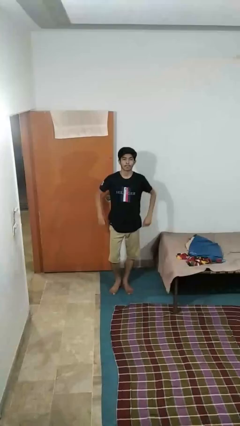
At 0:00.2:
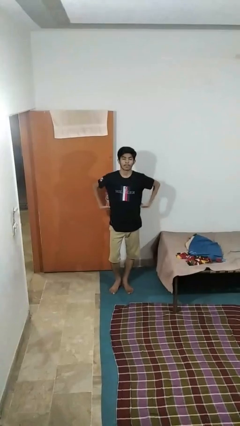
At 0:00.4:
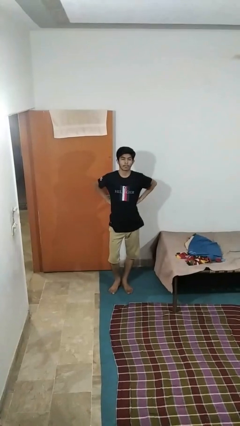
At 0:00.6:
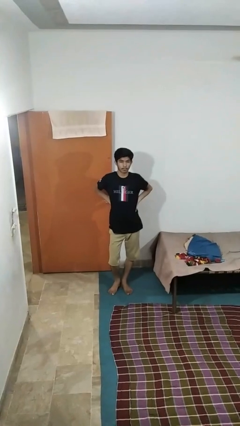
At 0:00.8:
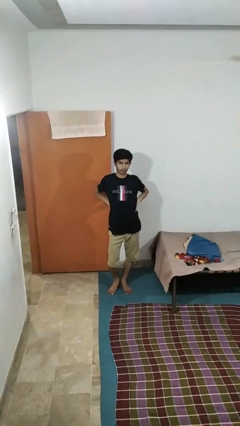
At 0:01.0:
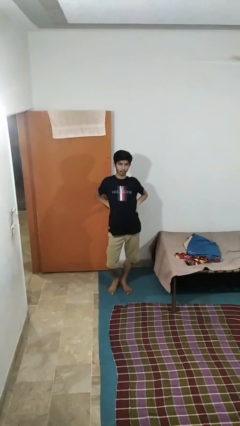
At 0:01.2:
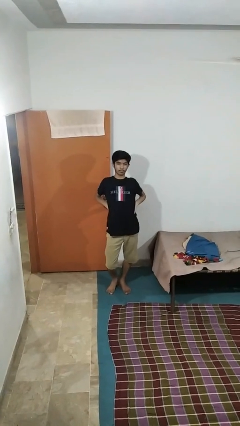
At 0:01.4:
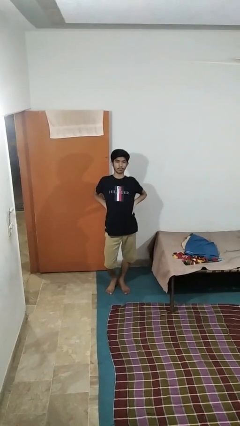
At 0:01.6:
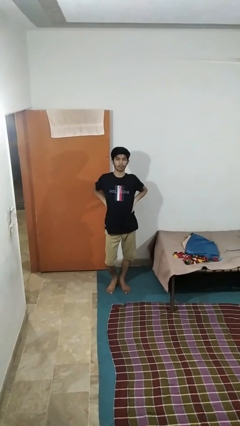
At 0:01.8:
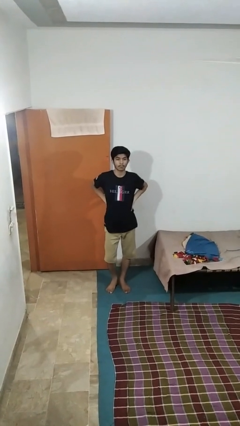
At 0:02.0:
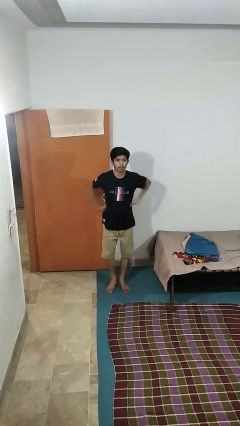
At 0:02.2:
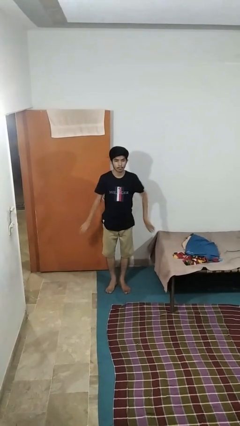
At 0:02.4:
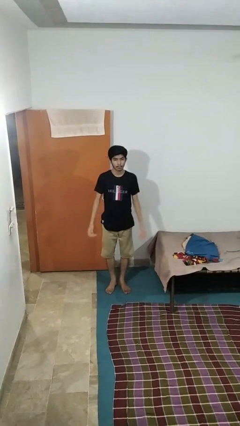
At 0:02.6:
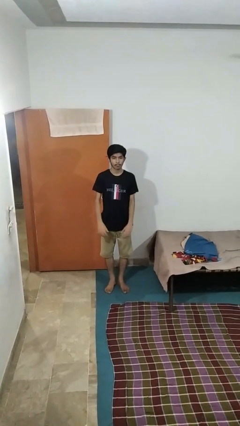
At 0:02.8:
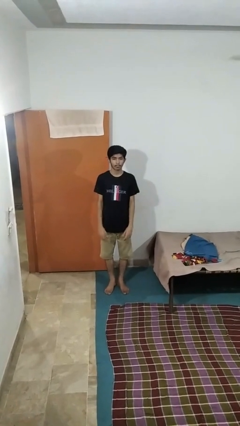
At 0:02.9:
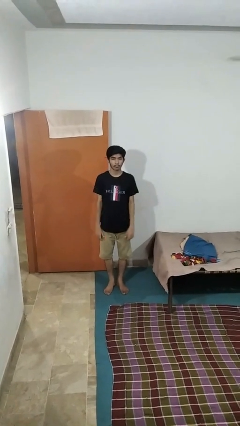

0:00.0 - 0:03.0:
person stretches back

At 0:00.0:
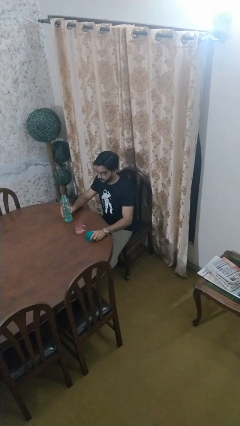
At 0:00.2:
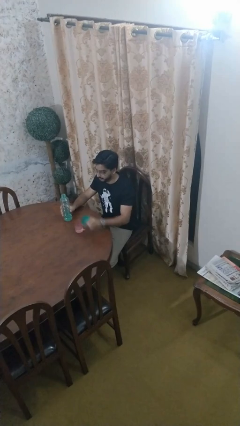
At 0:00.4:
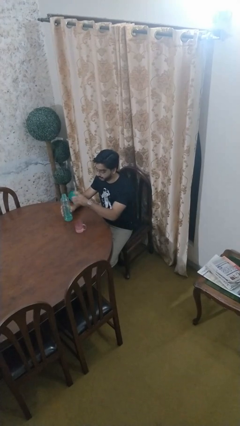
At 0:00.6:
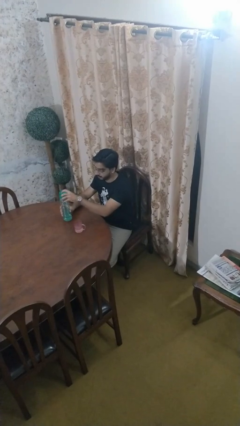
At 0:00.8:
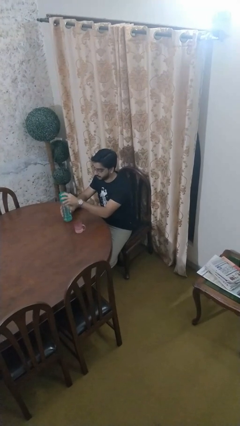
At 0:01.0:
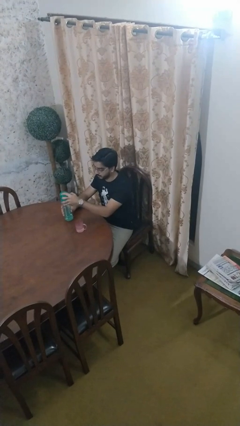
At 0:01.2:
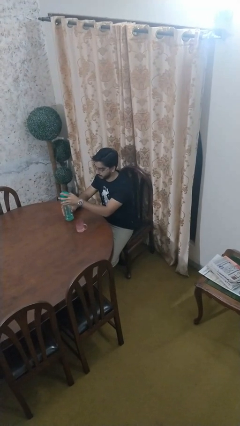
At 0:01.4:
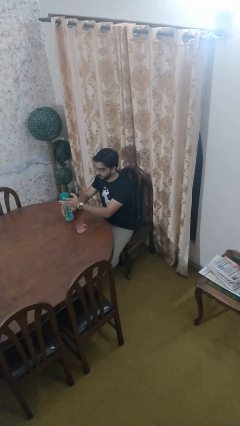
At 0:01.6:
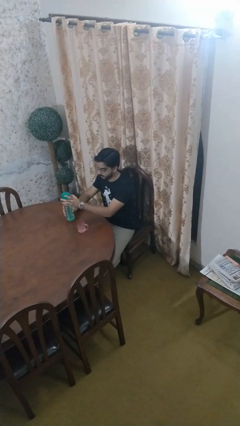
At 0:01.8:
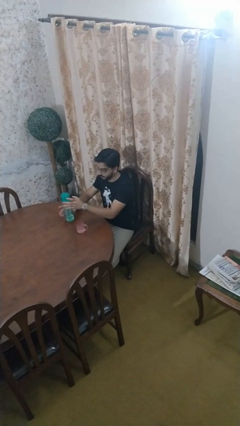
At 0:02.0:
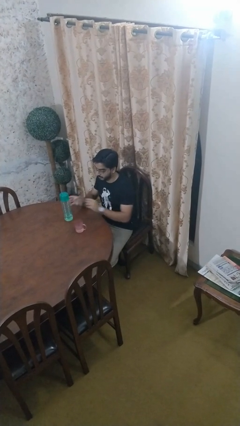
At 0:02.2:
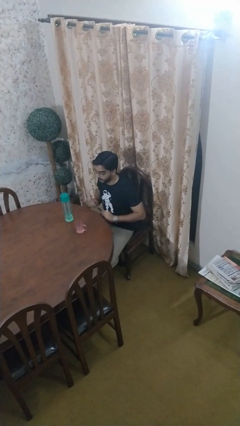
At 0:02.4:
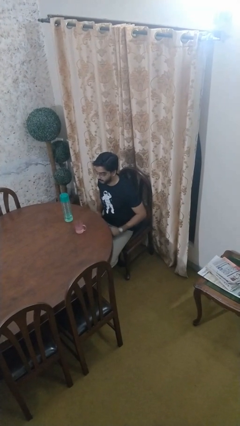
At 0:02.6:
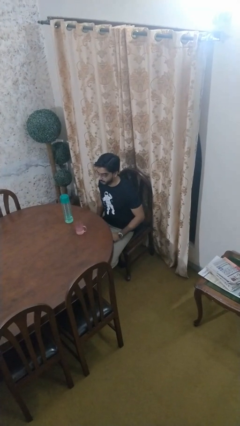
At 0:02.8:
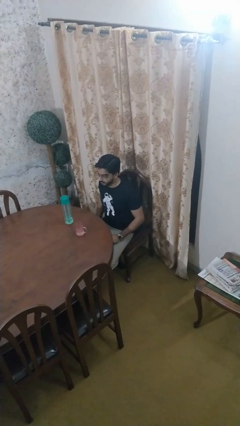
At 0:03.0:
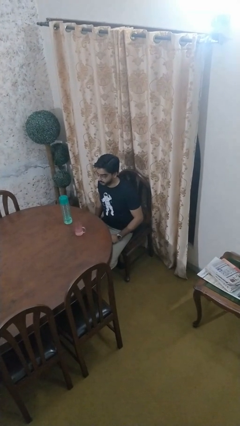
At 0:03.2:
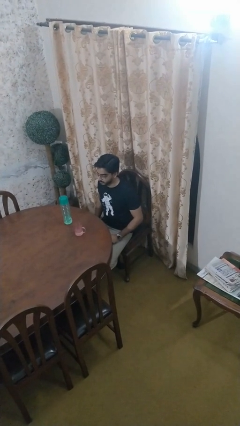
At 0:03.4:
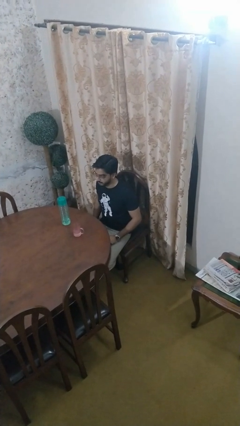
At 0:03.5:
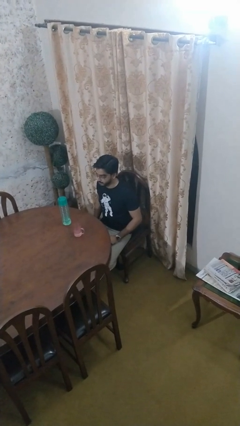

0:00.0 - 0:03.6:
person screws lid to bottle

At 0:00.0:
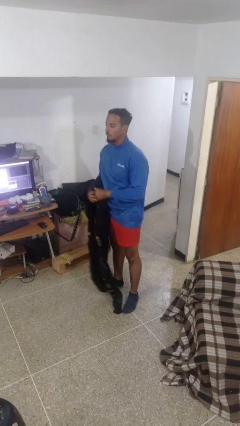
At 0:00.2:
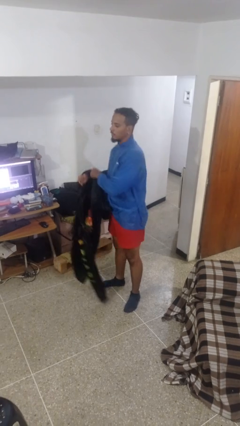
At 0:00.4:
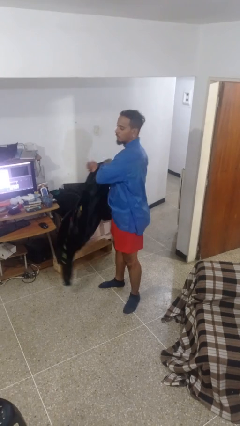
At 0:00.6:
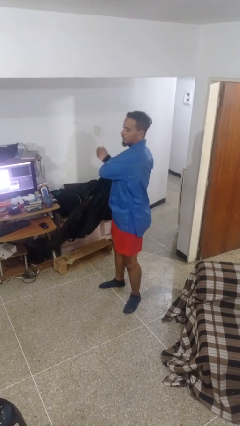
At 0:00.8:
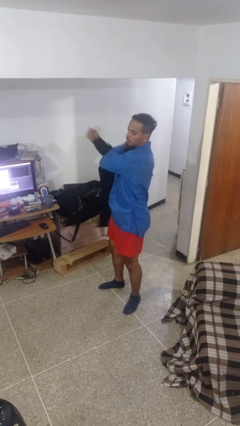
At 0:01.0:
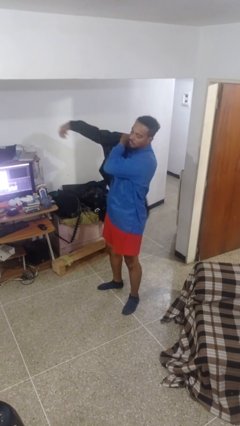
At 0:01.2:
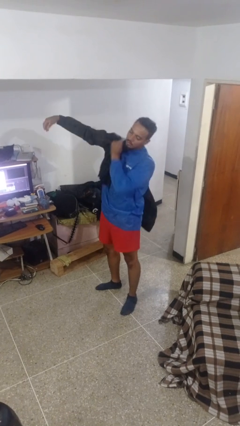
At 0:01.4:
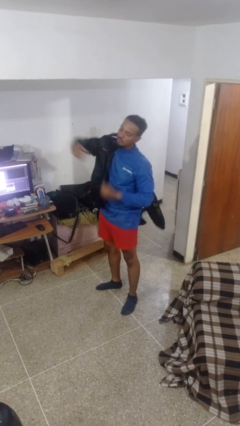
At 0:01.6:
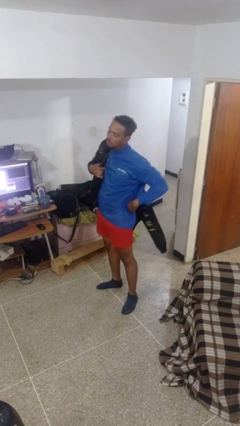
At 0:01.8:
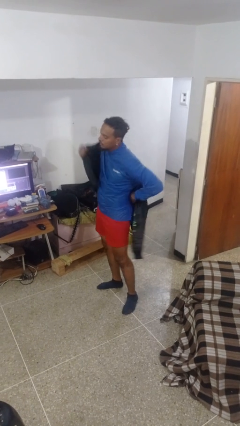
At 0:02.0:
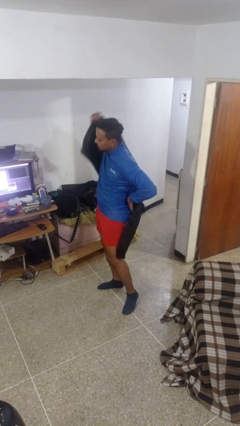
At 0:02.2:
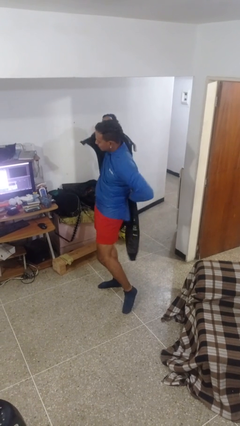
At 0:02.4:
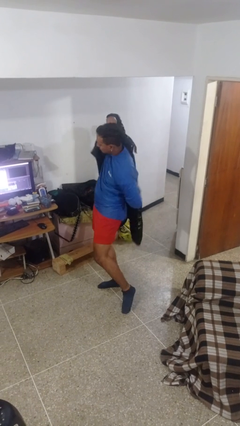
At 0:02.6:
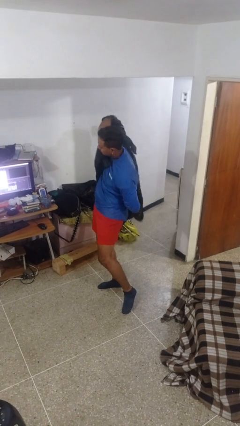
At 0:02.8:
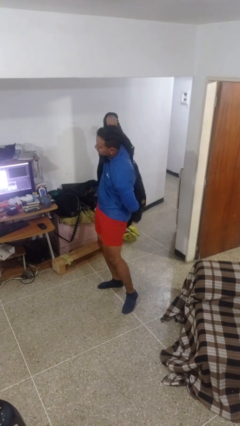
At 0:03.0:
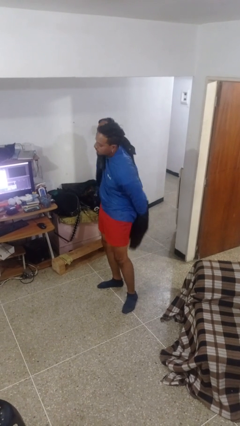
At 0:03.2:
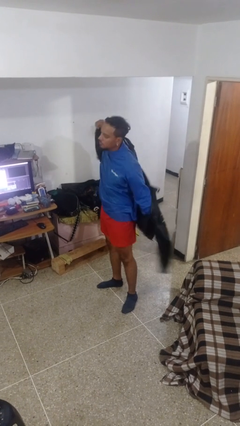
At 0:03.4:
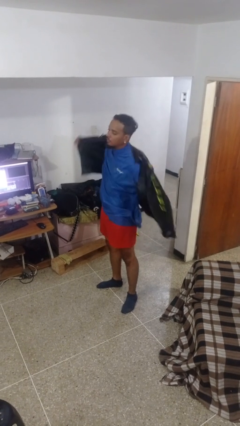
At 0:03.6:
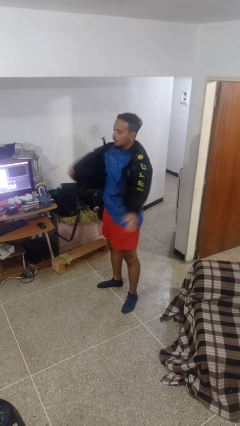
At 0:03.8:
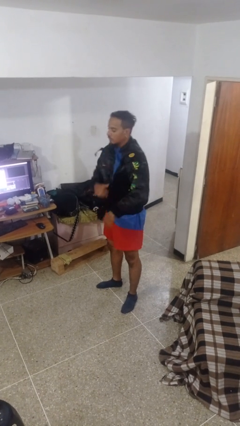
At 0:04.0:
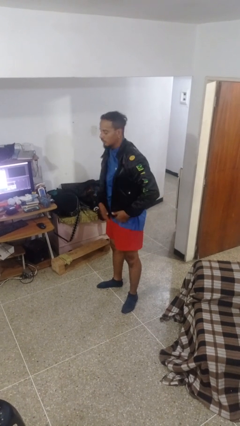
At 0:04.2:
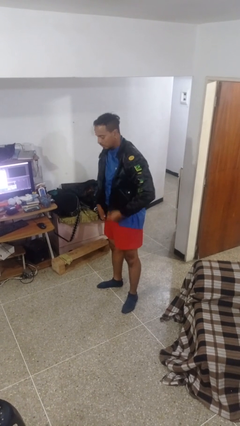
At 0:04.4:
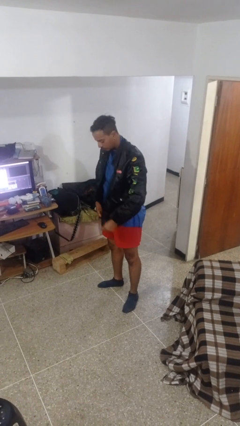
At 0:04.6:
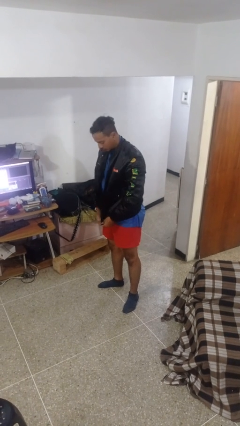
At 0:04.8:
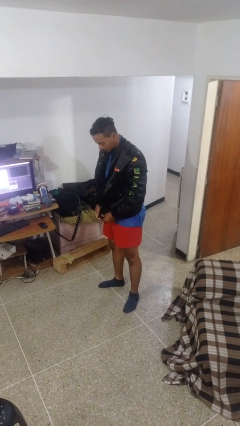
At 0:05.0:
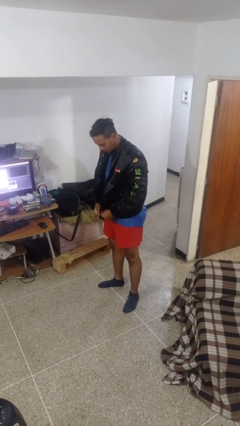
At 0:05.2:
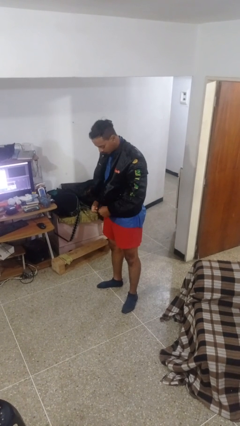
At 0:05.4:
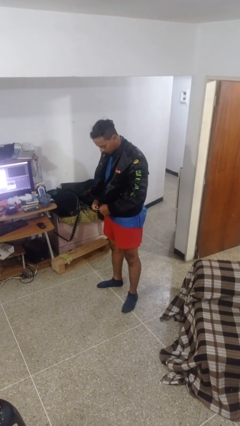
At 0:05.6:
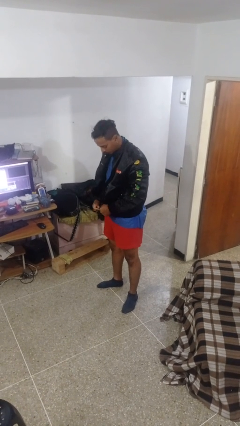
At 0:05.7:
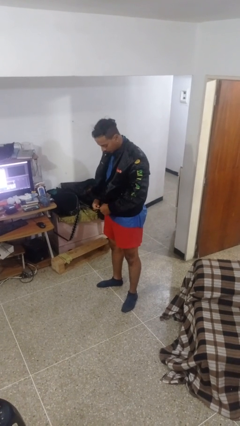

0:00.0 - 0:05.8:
person puts on jacket

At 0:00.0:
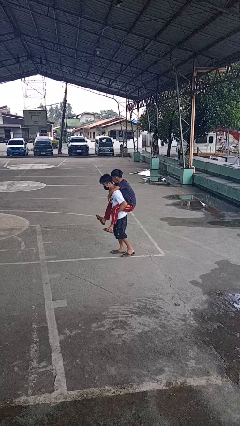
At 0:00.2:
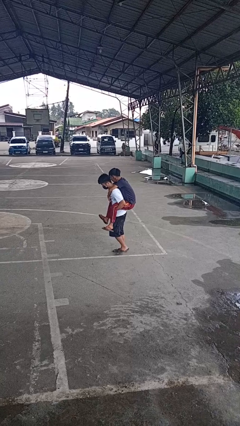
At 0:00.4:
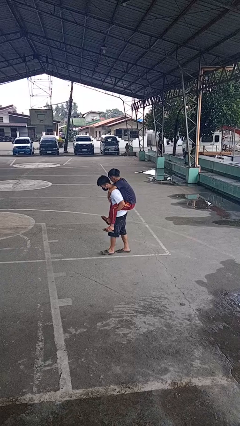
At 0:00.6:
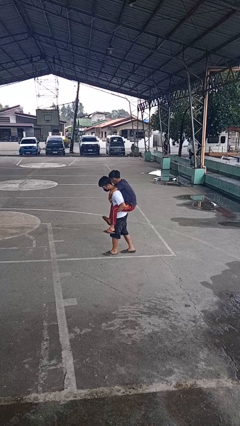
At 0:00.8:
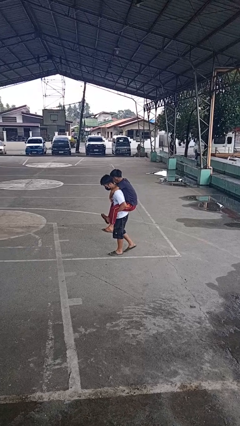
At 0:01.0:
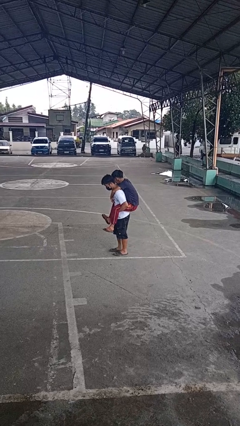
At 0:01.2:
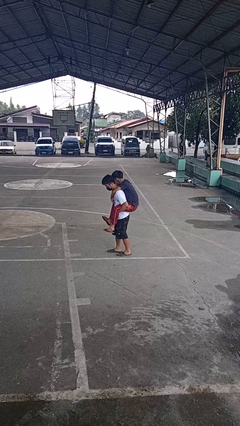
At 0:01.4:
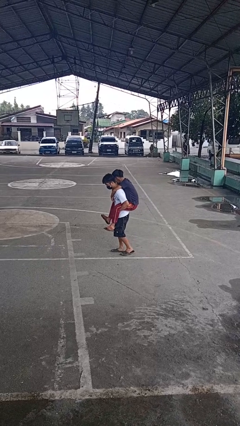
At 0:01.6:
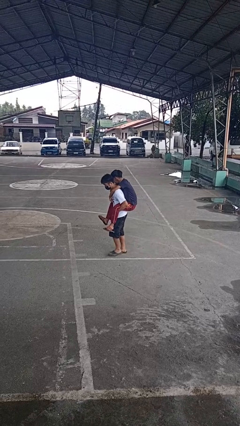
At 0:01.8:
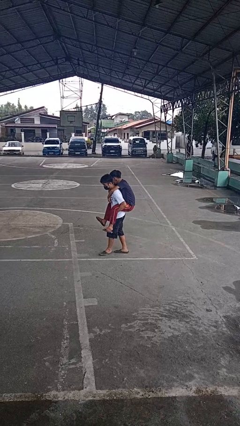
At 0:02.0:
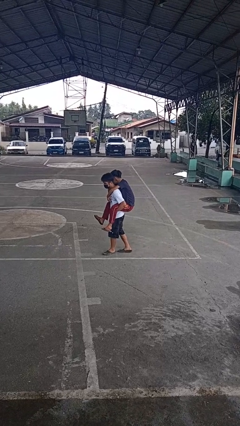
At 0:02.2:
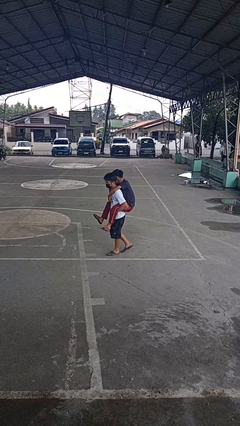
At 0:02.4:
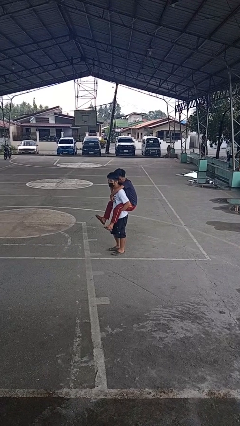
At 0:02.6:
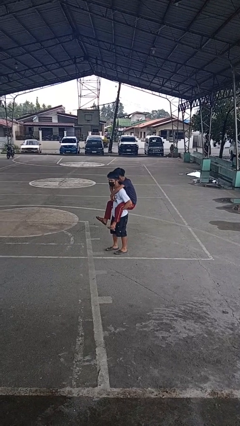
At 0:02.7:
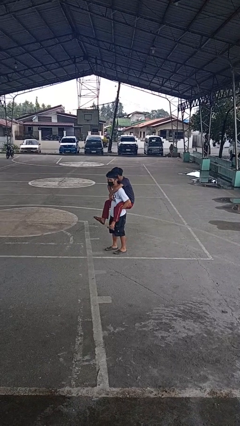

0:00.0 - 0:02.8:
person carries person on shoulders

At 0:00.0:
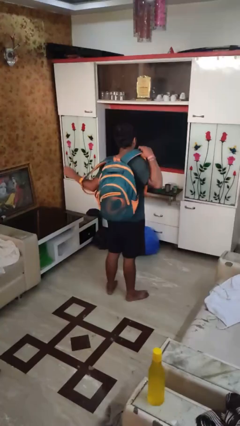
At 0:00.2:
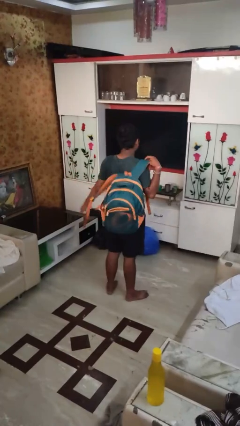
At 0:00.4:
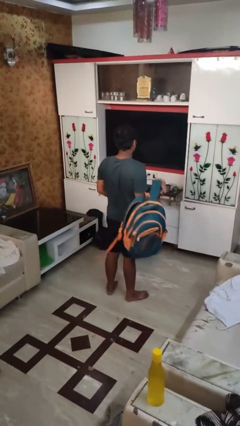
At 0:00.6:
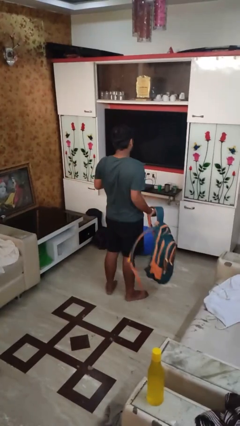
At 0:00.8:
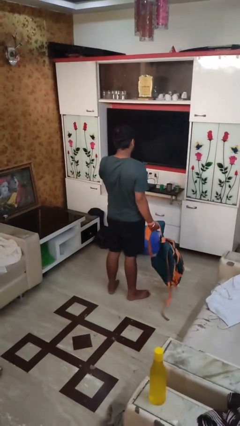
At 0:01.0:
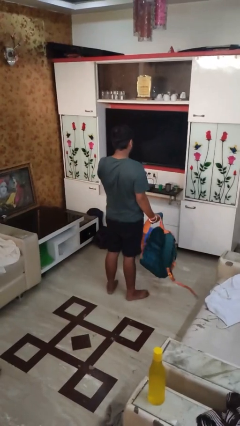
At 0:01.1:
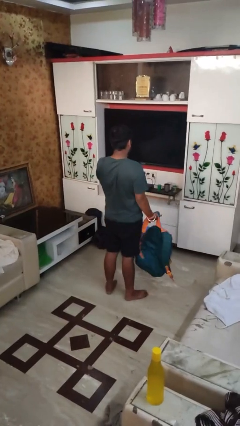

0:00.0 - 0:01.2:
person takes off backpack

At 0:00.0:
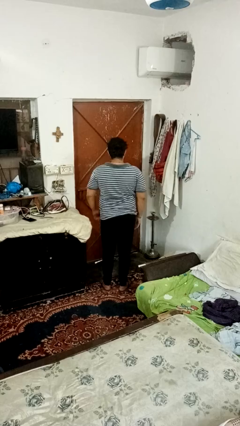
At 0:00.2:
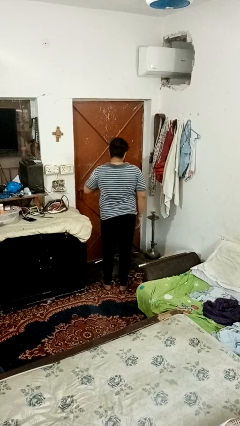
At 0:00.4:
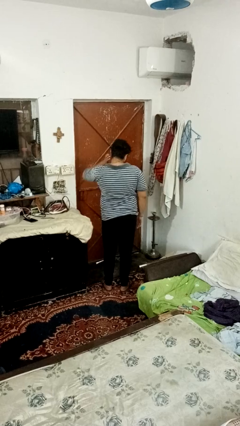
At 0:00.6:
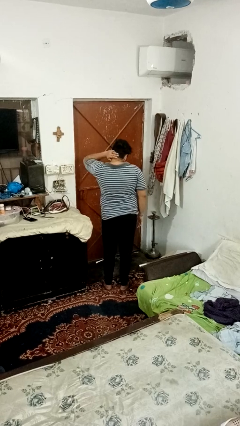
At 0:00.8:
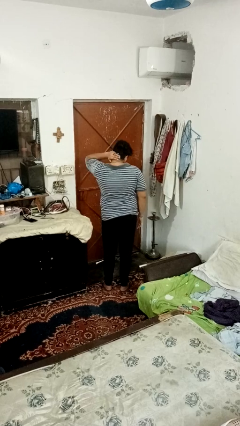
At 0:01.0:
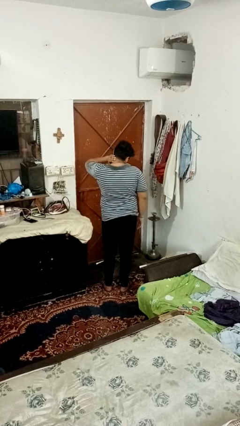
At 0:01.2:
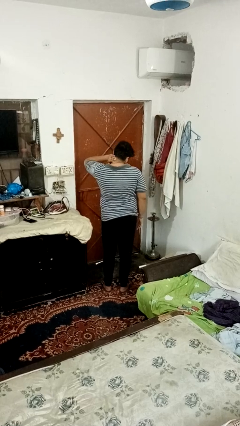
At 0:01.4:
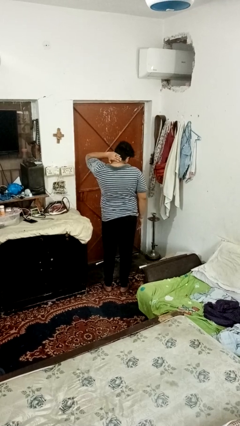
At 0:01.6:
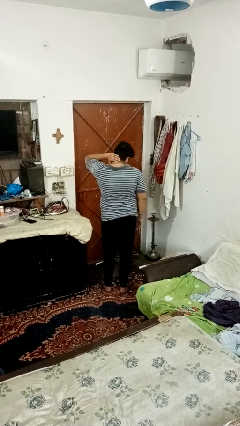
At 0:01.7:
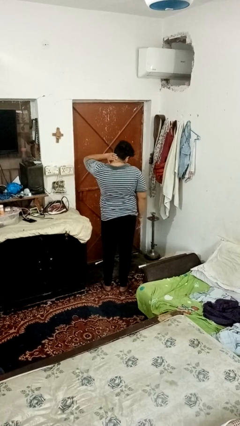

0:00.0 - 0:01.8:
person rubs neck
